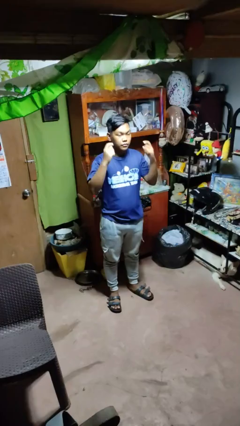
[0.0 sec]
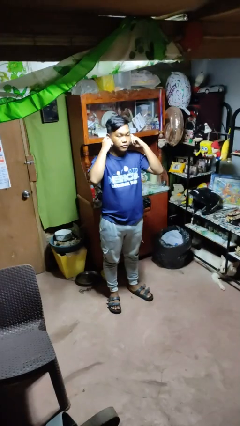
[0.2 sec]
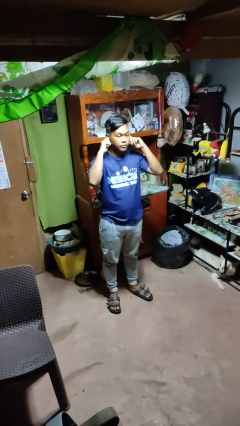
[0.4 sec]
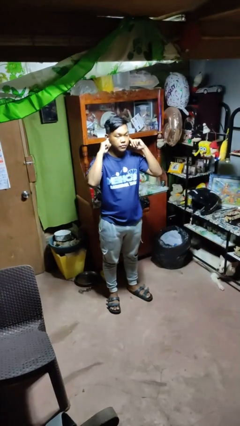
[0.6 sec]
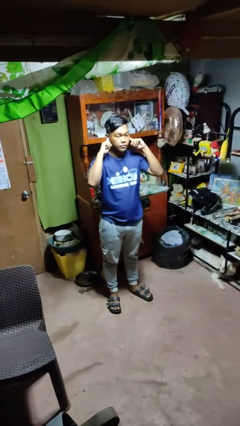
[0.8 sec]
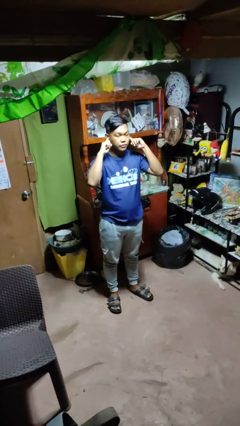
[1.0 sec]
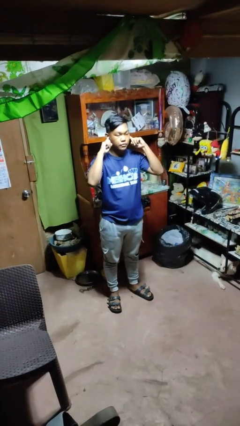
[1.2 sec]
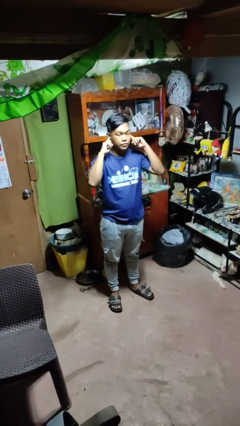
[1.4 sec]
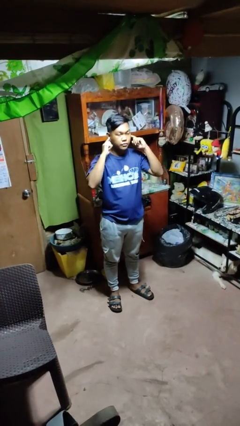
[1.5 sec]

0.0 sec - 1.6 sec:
person puts fingers in ear

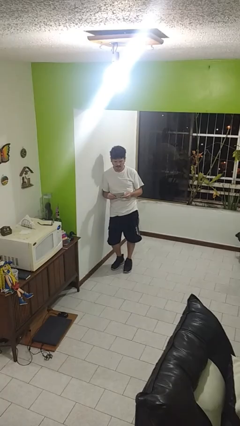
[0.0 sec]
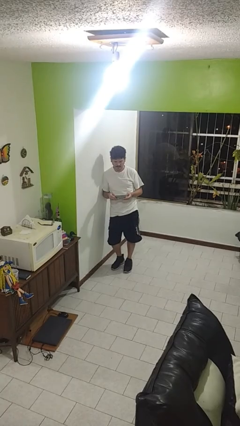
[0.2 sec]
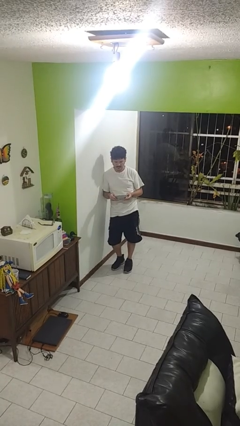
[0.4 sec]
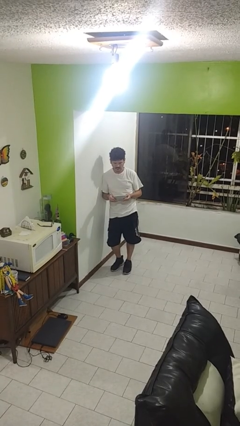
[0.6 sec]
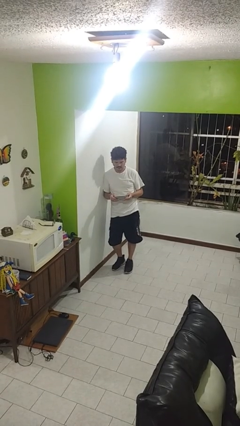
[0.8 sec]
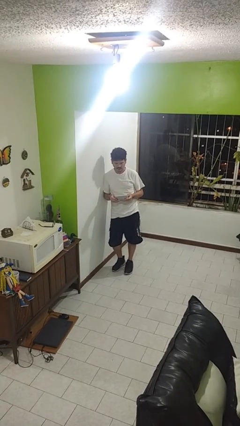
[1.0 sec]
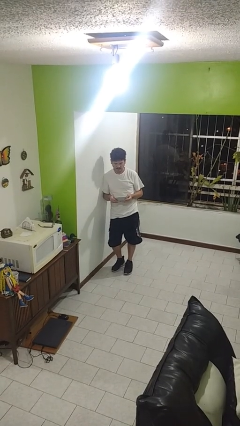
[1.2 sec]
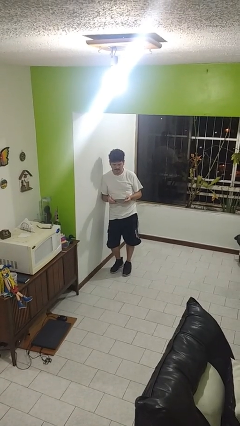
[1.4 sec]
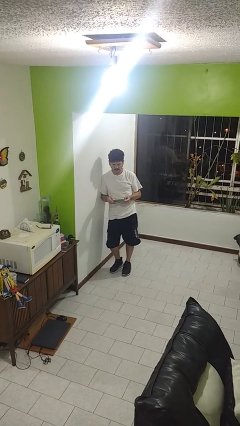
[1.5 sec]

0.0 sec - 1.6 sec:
person interacts with handheld game

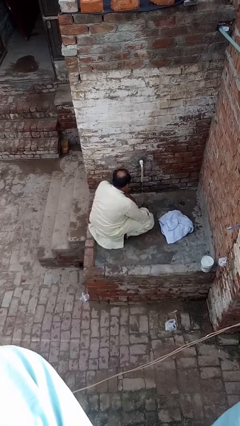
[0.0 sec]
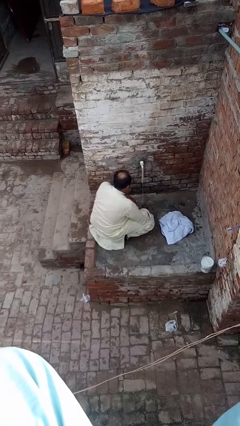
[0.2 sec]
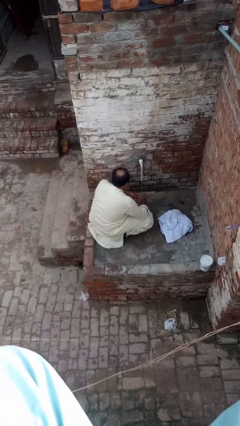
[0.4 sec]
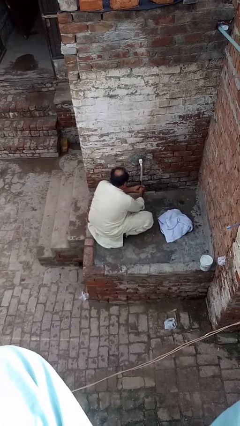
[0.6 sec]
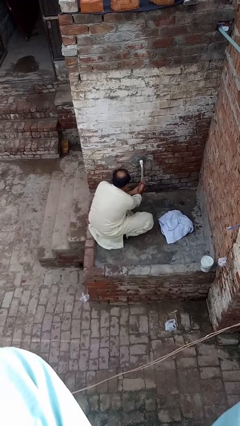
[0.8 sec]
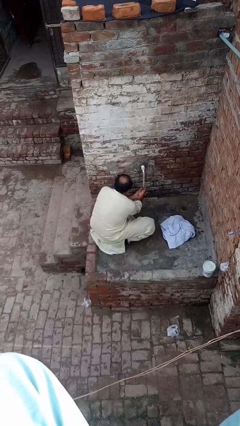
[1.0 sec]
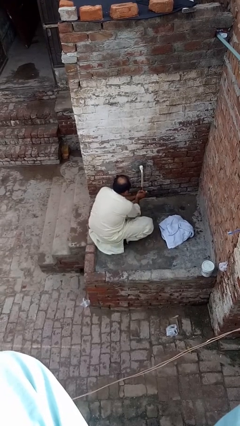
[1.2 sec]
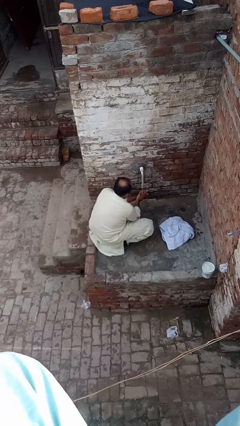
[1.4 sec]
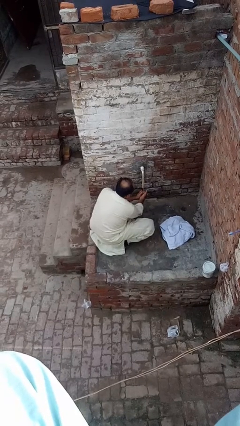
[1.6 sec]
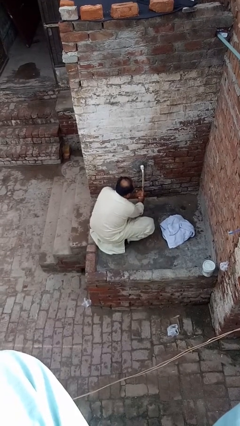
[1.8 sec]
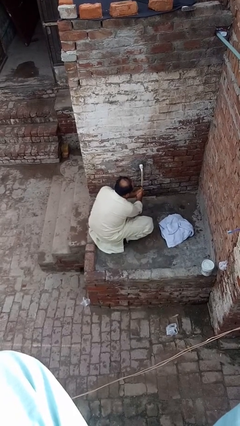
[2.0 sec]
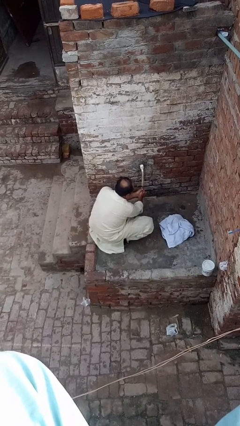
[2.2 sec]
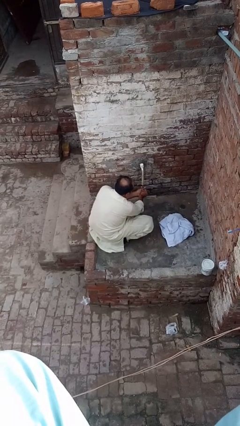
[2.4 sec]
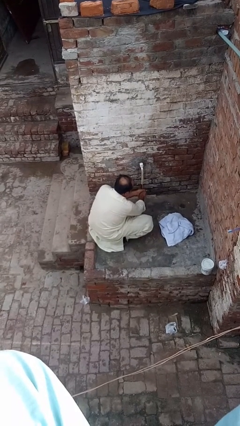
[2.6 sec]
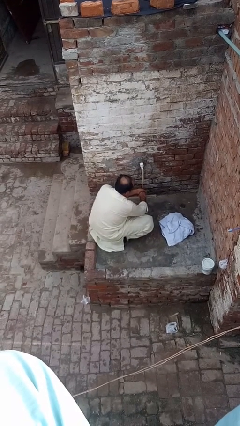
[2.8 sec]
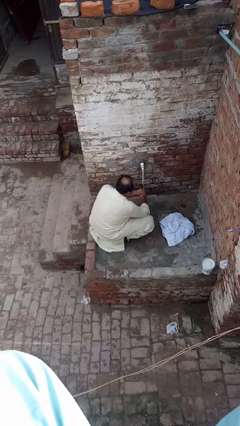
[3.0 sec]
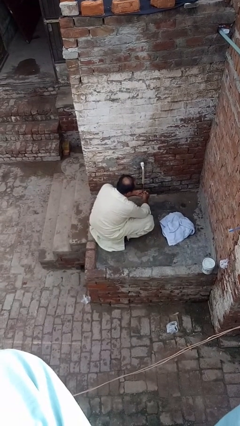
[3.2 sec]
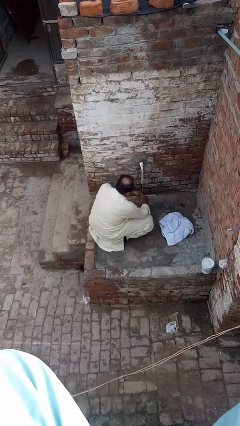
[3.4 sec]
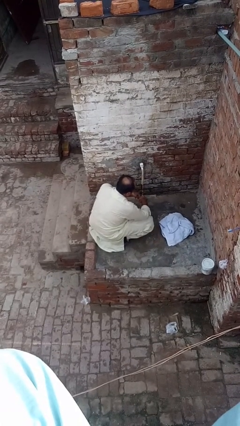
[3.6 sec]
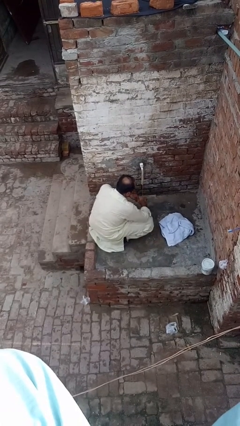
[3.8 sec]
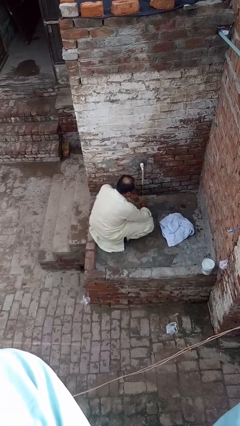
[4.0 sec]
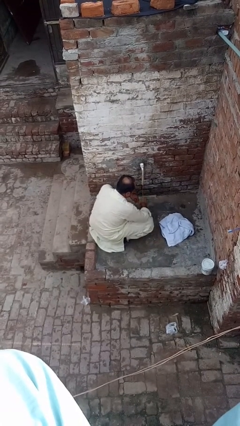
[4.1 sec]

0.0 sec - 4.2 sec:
person washes hands

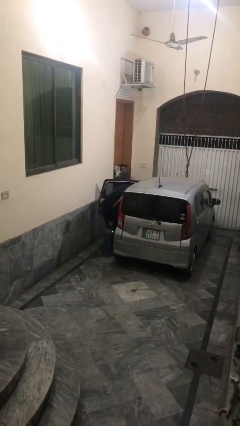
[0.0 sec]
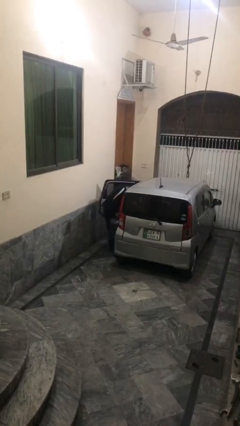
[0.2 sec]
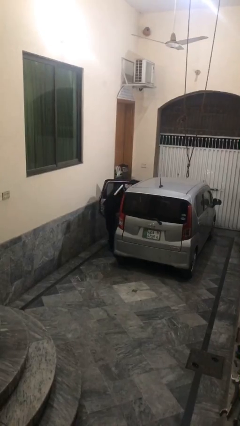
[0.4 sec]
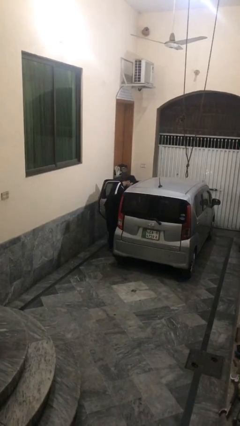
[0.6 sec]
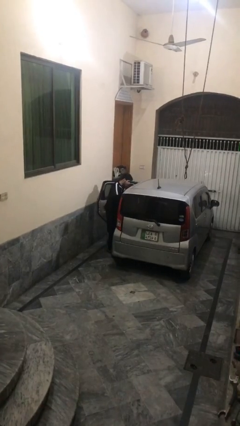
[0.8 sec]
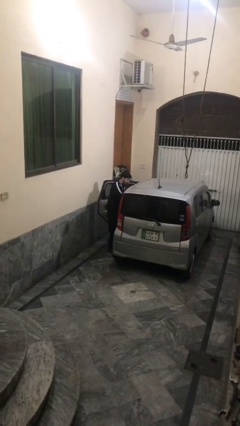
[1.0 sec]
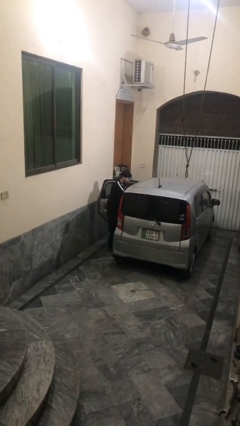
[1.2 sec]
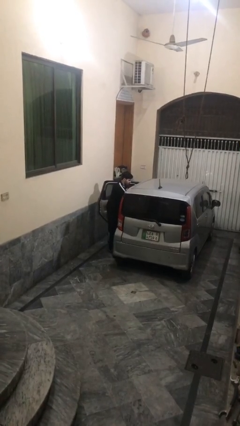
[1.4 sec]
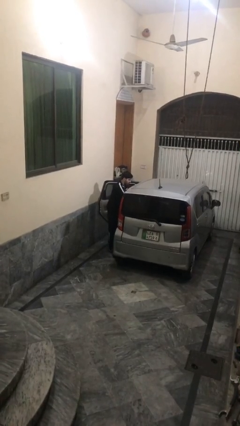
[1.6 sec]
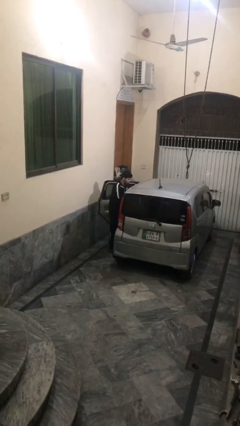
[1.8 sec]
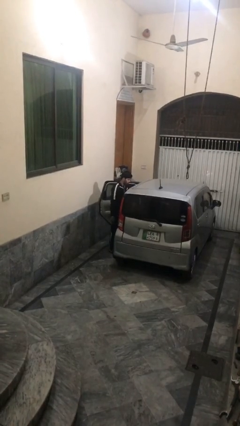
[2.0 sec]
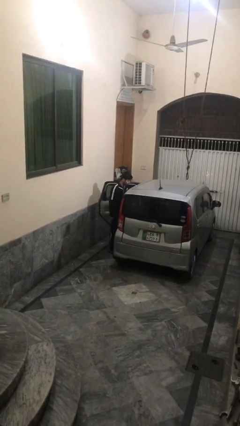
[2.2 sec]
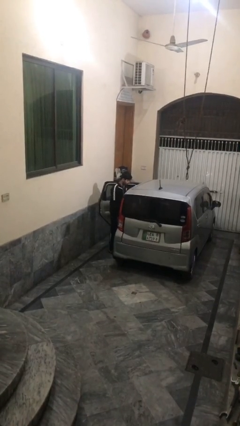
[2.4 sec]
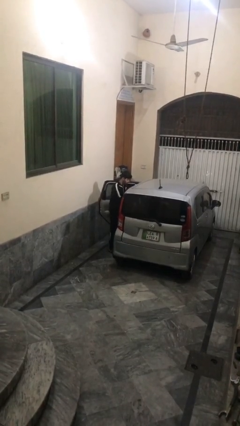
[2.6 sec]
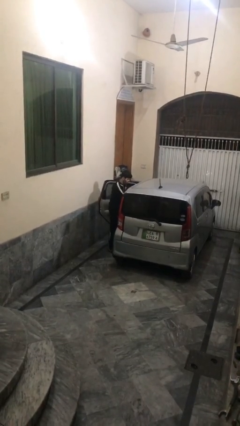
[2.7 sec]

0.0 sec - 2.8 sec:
person loads car

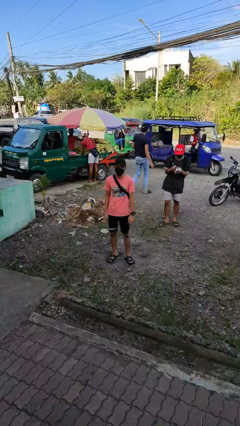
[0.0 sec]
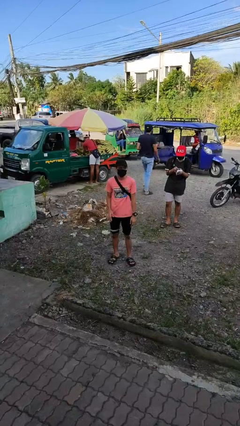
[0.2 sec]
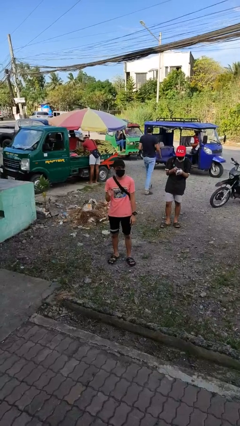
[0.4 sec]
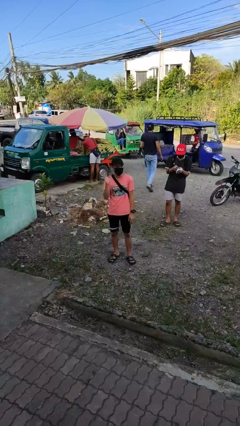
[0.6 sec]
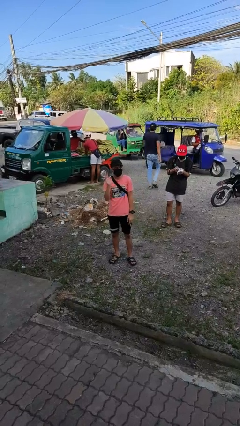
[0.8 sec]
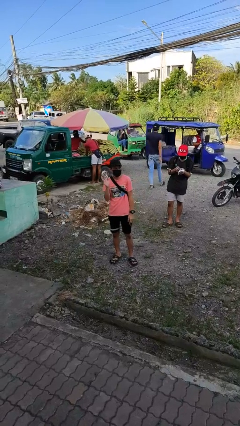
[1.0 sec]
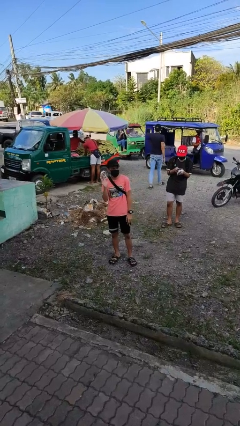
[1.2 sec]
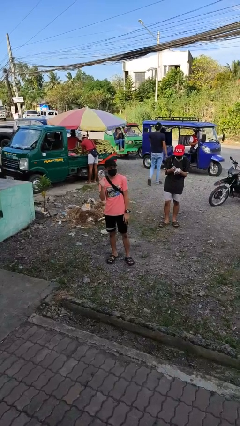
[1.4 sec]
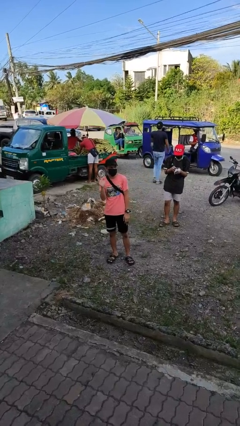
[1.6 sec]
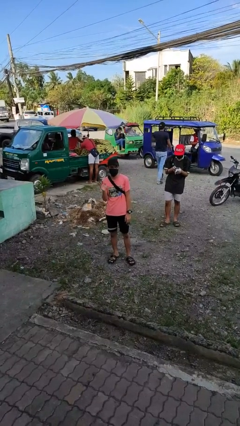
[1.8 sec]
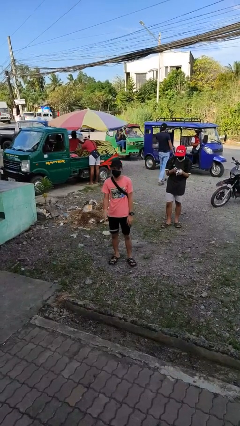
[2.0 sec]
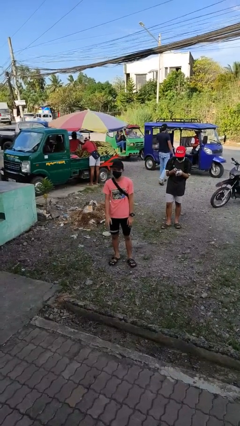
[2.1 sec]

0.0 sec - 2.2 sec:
person waves at person

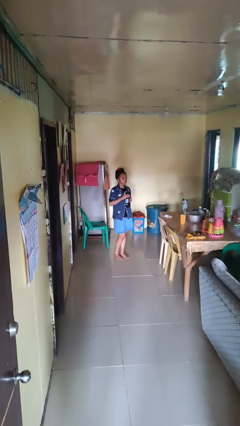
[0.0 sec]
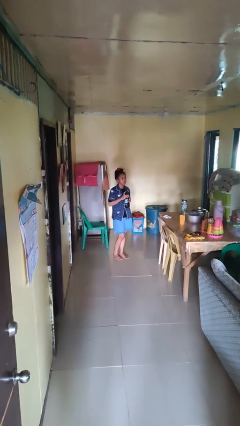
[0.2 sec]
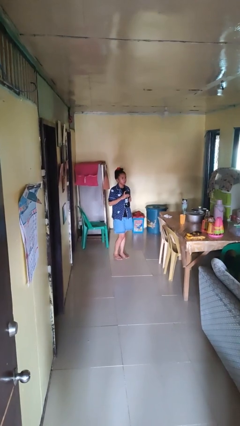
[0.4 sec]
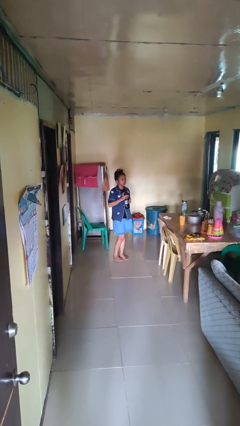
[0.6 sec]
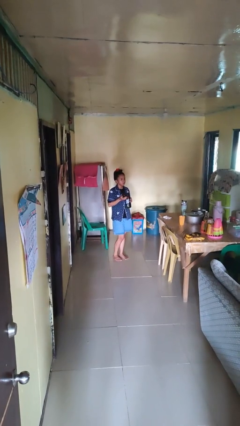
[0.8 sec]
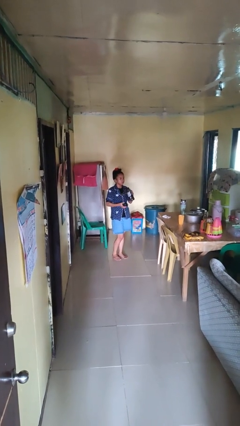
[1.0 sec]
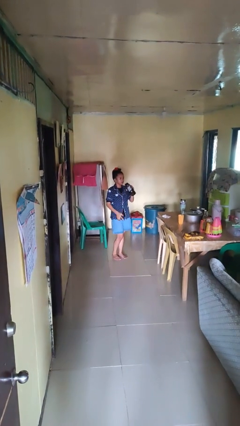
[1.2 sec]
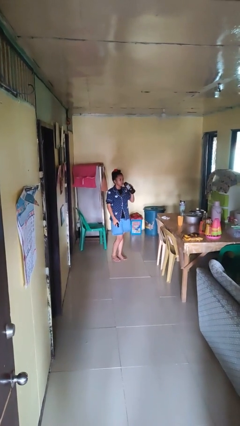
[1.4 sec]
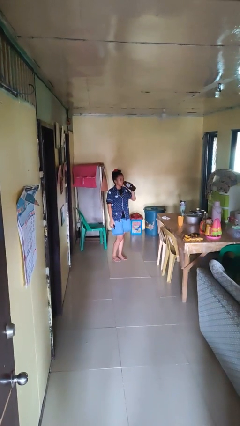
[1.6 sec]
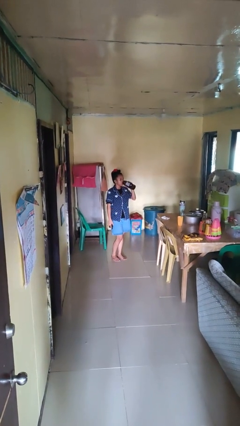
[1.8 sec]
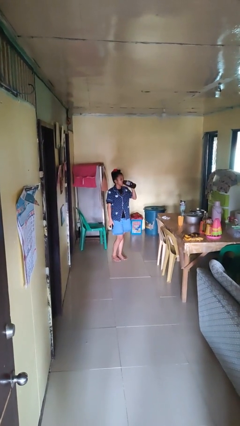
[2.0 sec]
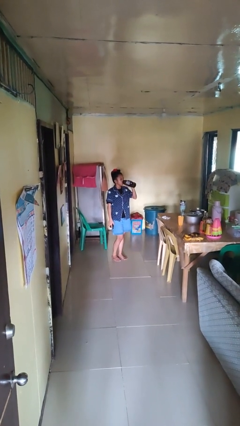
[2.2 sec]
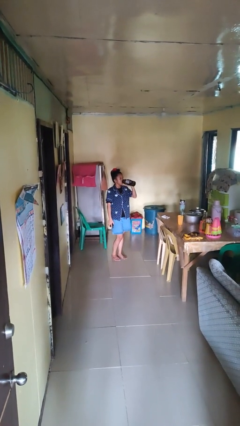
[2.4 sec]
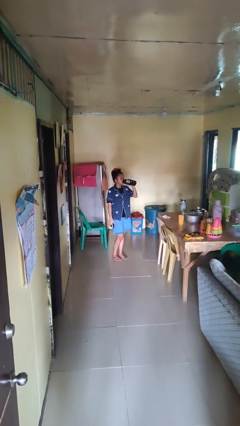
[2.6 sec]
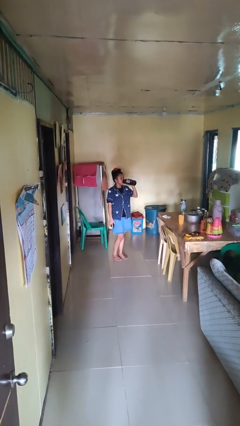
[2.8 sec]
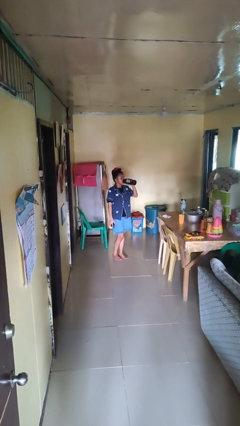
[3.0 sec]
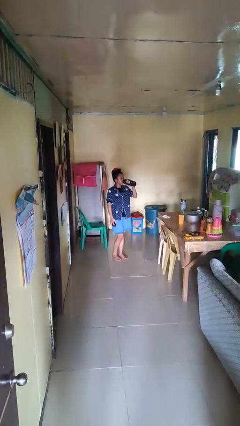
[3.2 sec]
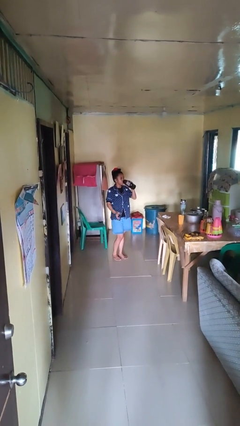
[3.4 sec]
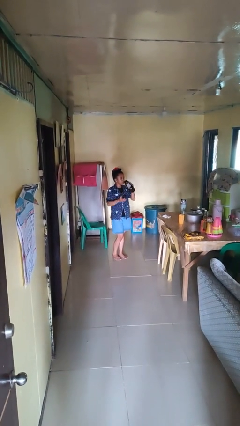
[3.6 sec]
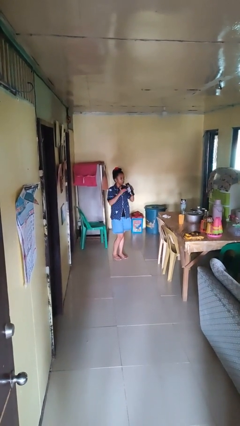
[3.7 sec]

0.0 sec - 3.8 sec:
person drinks from bottle

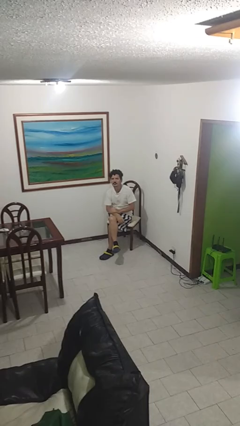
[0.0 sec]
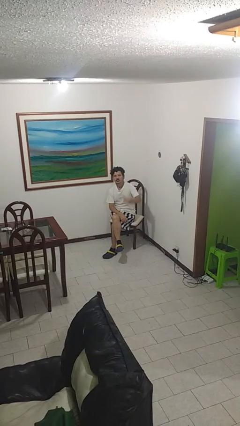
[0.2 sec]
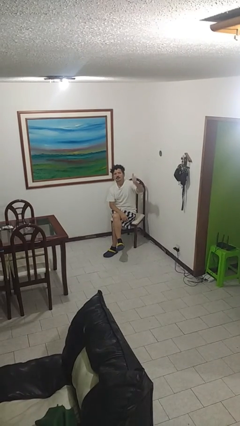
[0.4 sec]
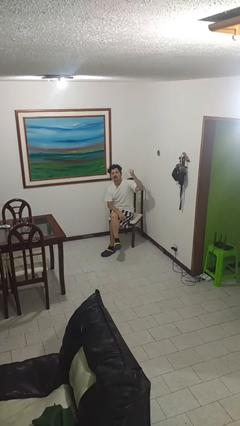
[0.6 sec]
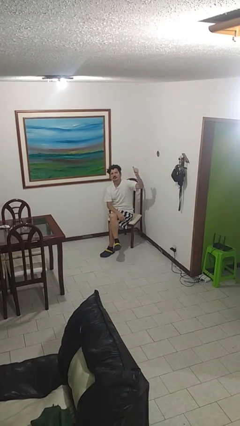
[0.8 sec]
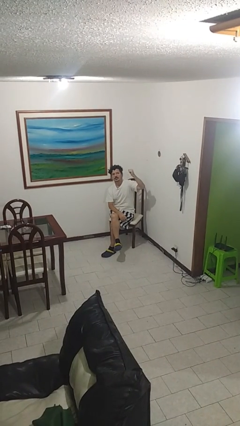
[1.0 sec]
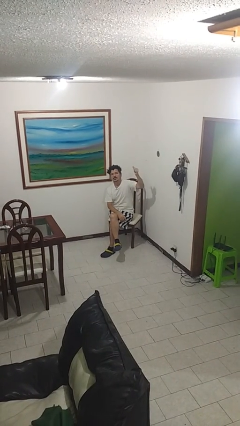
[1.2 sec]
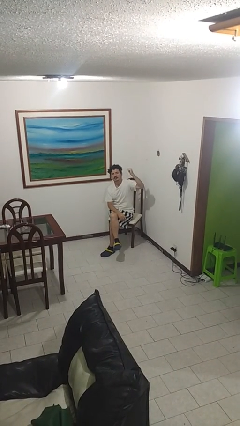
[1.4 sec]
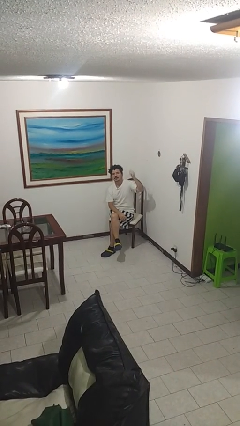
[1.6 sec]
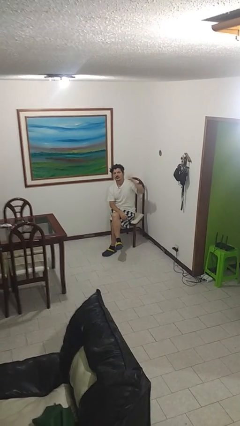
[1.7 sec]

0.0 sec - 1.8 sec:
person gestures behind me
